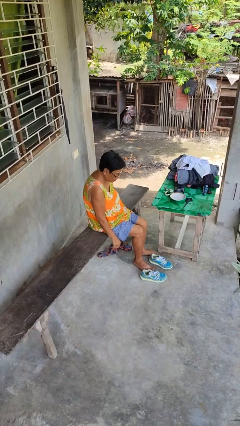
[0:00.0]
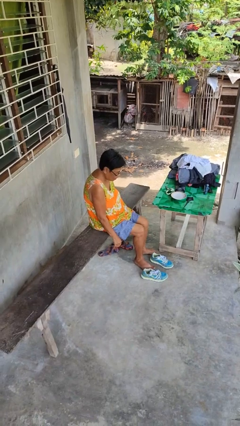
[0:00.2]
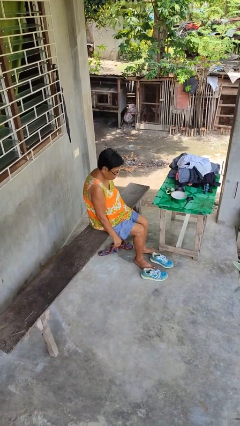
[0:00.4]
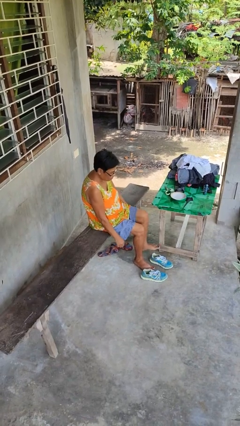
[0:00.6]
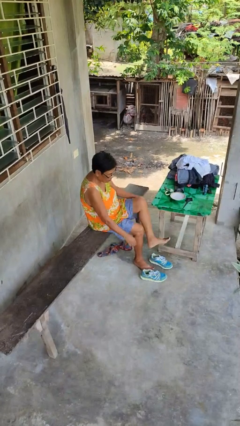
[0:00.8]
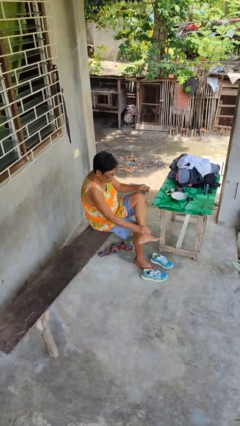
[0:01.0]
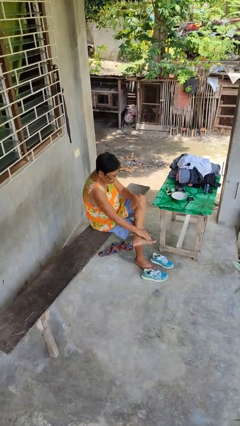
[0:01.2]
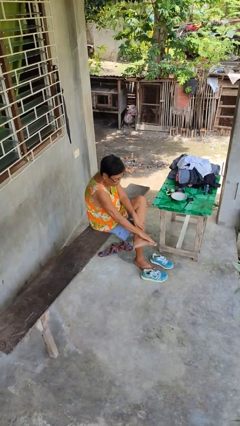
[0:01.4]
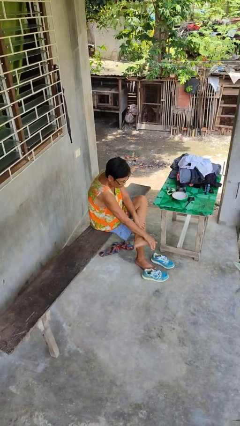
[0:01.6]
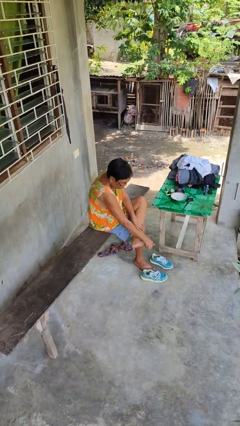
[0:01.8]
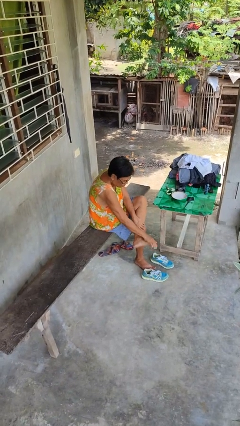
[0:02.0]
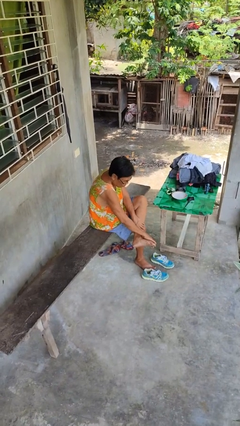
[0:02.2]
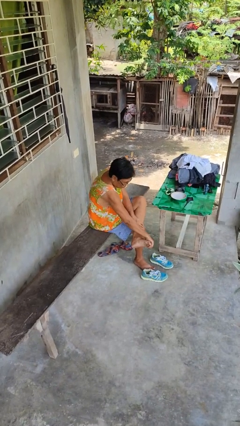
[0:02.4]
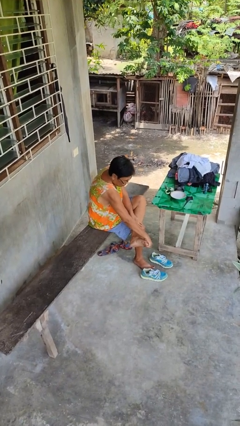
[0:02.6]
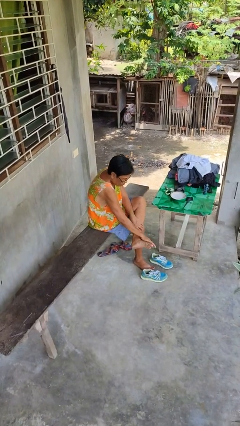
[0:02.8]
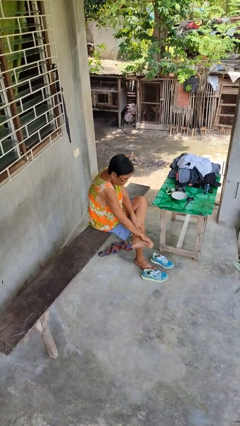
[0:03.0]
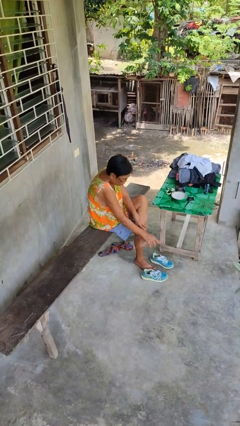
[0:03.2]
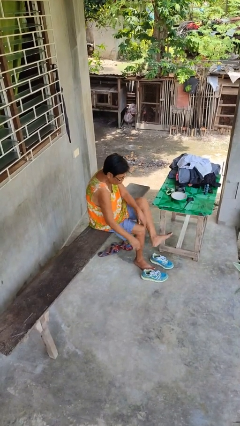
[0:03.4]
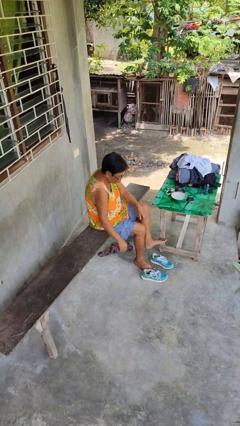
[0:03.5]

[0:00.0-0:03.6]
person rubs foot

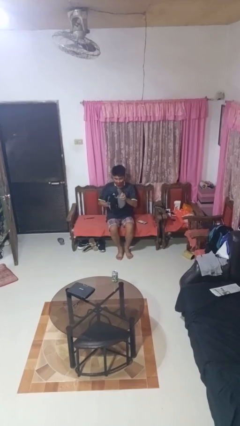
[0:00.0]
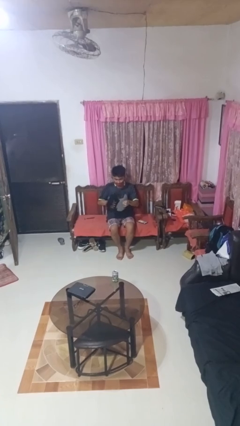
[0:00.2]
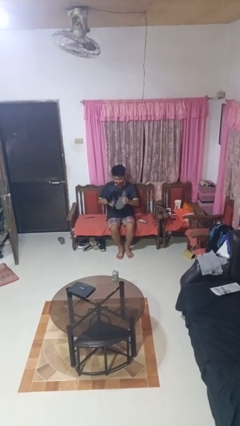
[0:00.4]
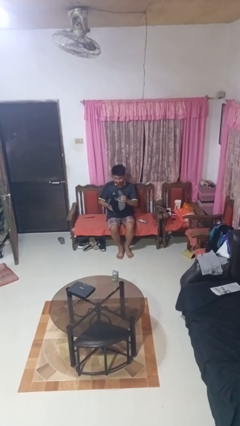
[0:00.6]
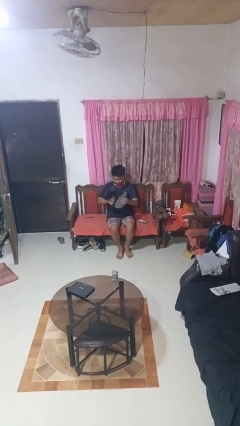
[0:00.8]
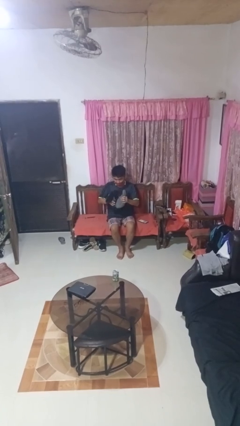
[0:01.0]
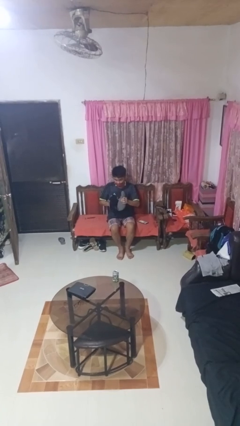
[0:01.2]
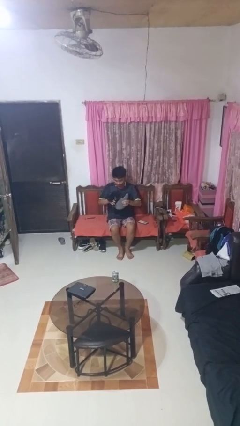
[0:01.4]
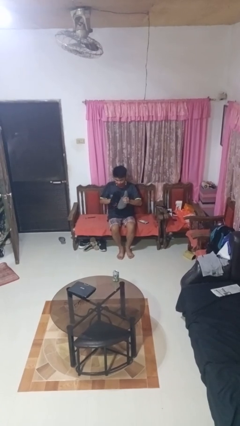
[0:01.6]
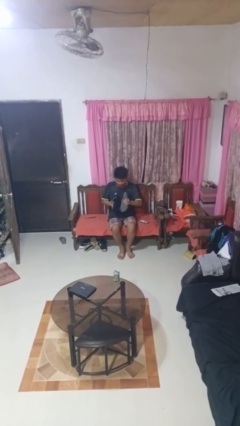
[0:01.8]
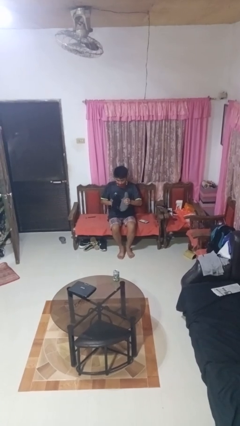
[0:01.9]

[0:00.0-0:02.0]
person squeezes object

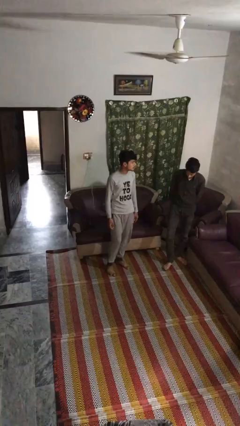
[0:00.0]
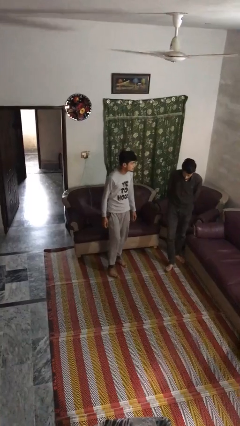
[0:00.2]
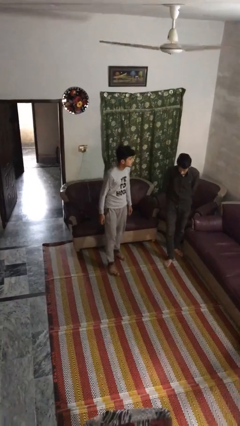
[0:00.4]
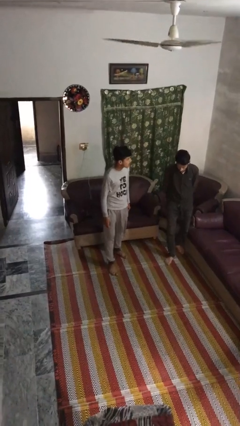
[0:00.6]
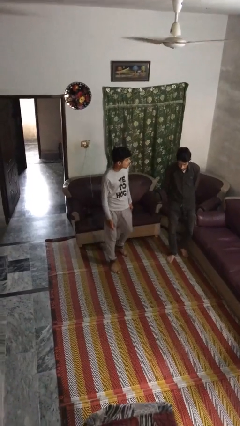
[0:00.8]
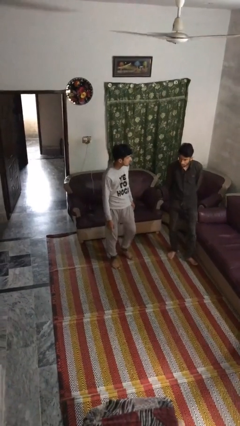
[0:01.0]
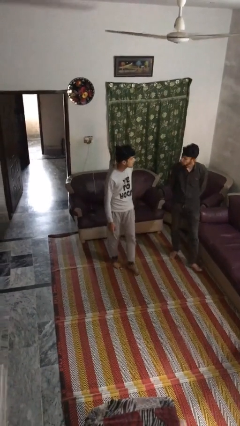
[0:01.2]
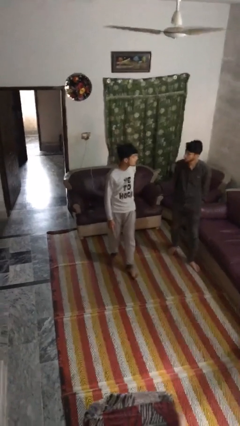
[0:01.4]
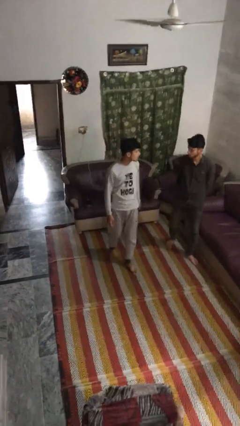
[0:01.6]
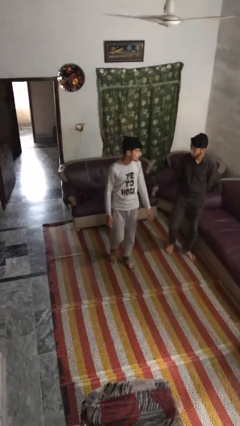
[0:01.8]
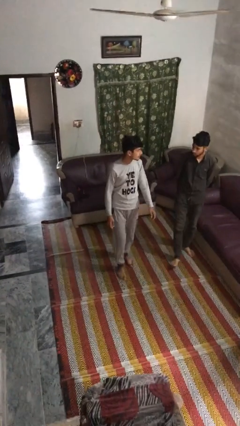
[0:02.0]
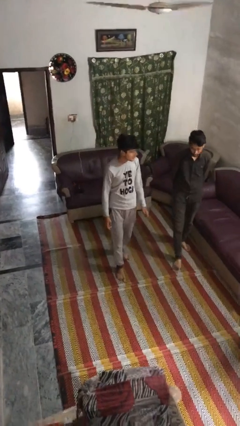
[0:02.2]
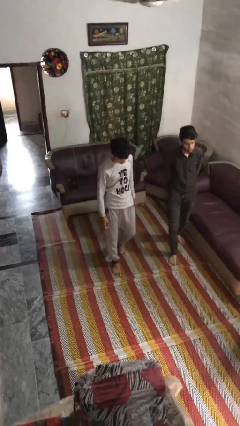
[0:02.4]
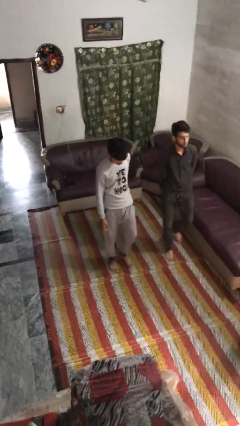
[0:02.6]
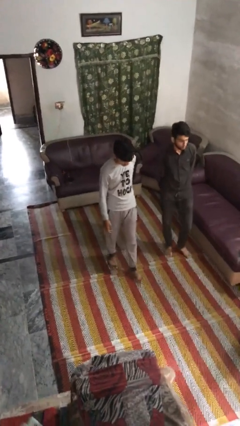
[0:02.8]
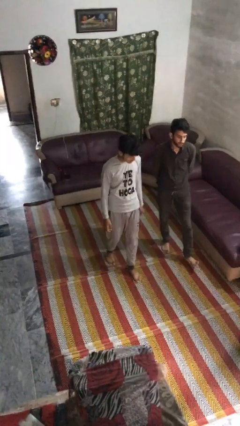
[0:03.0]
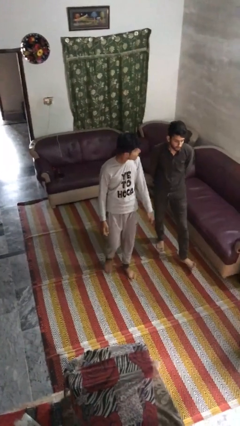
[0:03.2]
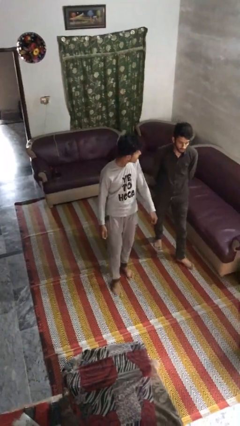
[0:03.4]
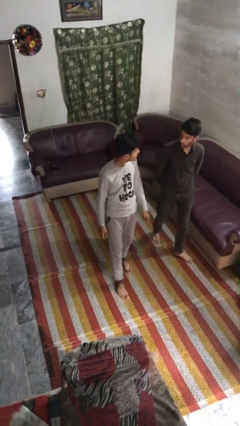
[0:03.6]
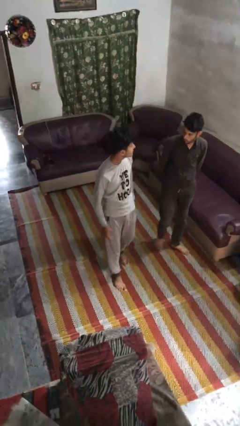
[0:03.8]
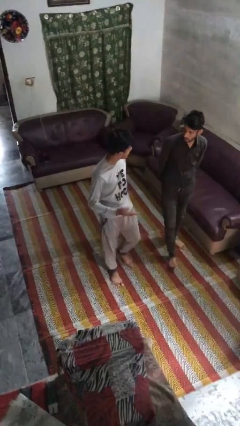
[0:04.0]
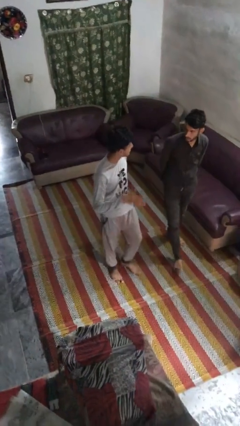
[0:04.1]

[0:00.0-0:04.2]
person talks to person

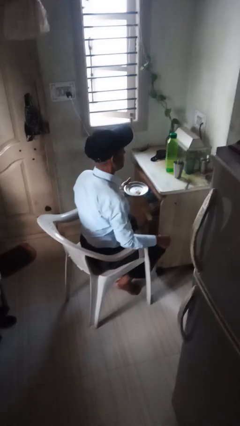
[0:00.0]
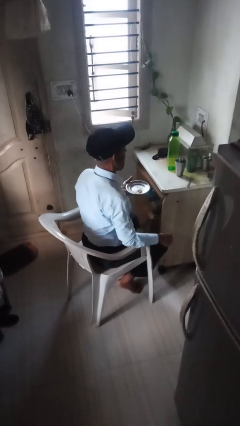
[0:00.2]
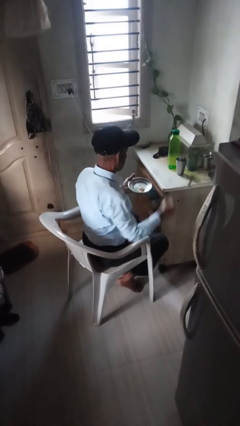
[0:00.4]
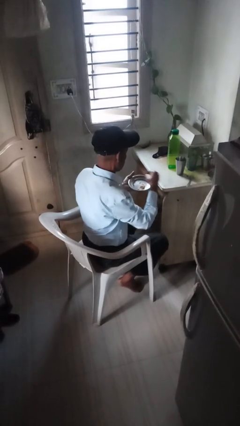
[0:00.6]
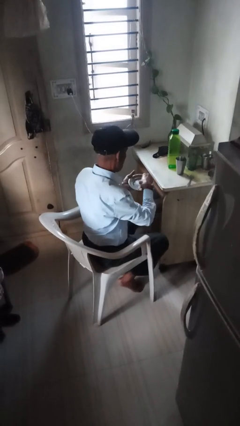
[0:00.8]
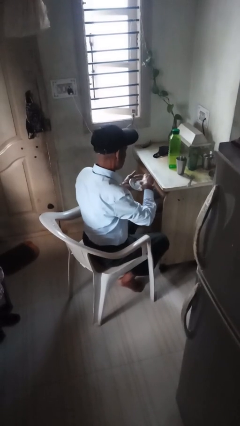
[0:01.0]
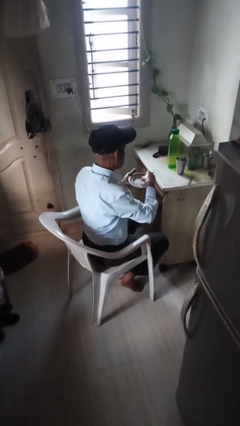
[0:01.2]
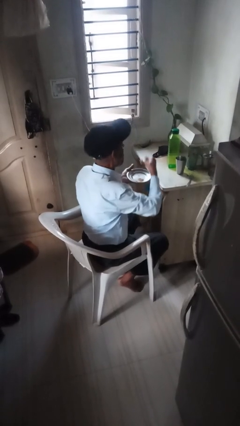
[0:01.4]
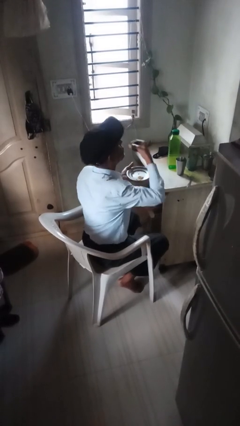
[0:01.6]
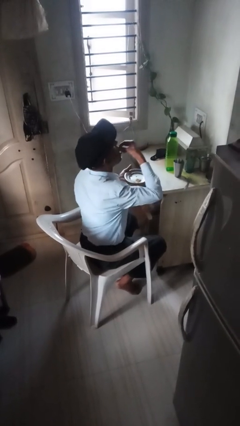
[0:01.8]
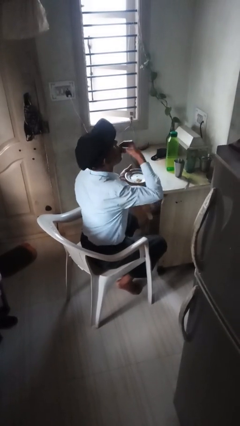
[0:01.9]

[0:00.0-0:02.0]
person eats with hands

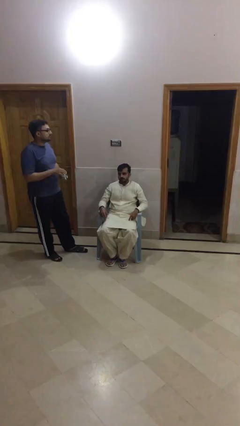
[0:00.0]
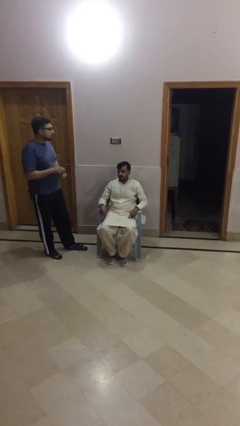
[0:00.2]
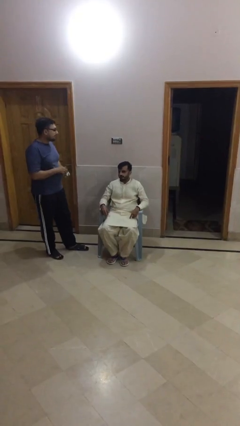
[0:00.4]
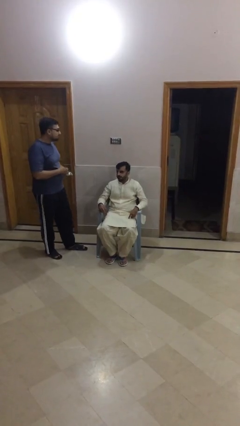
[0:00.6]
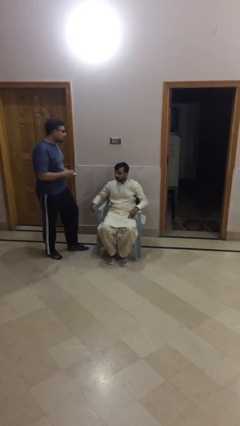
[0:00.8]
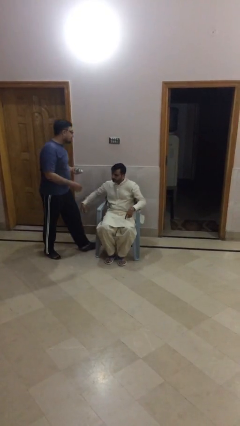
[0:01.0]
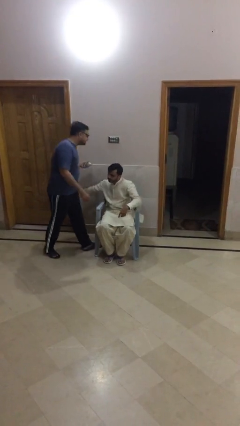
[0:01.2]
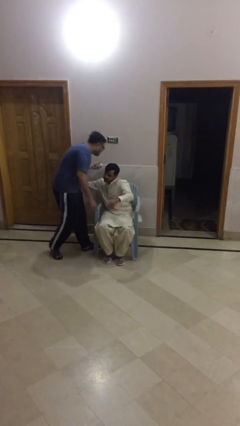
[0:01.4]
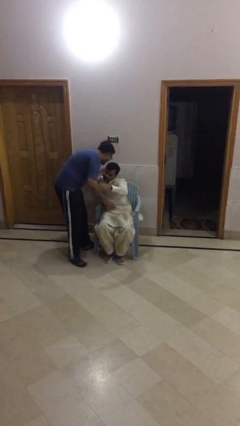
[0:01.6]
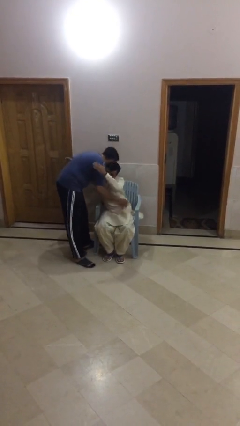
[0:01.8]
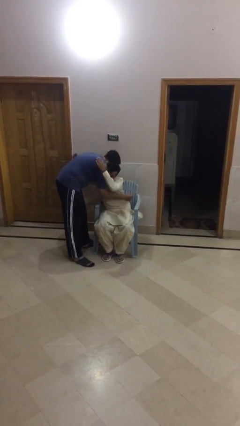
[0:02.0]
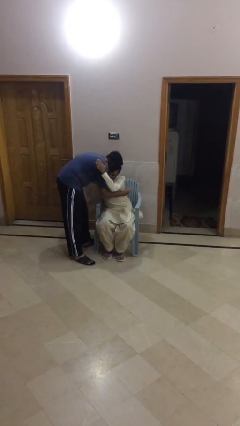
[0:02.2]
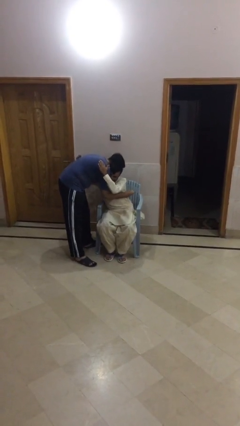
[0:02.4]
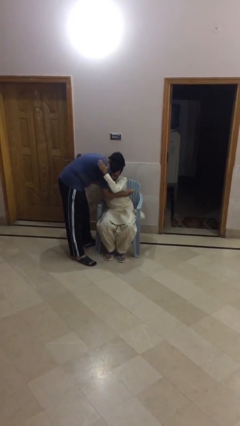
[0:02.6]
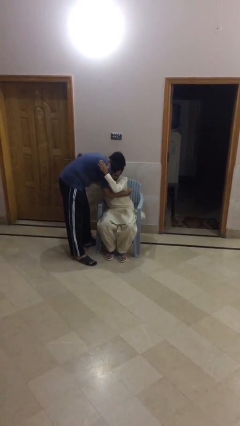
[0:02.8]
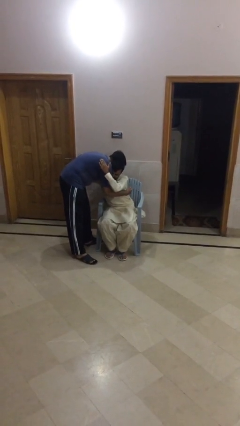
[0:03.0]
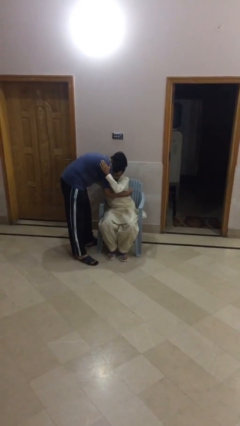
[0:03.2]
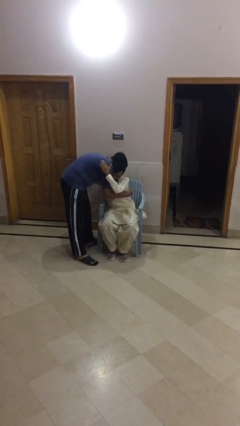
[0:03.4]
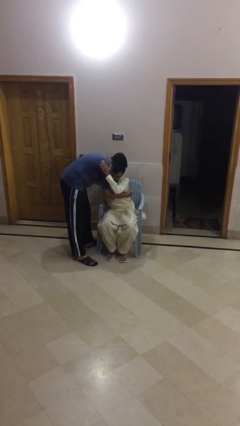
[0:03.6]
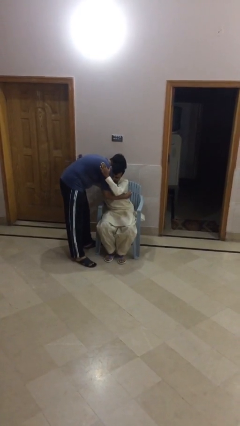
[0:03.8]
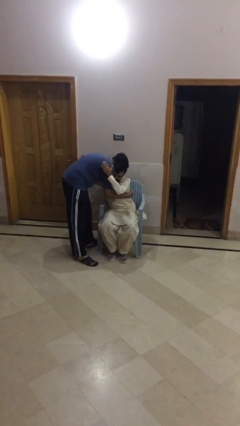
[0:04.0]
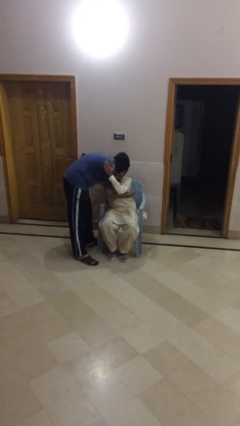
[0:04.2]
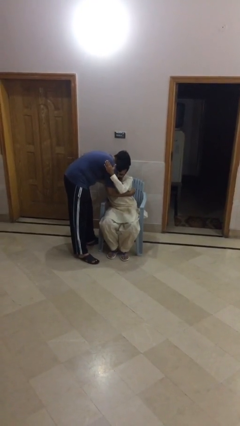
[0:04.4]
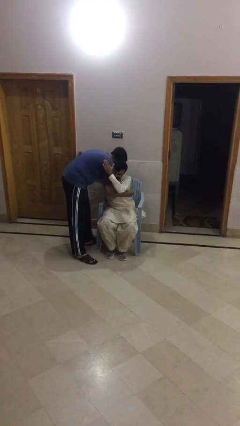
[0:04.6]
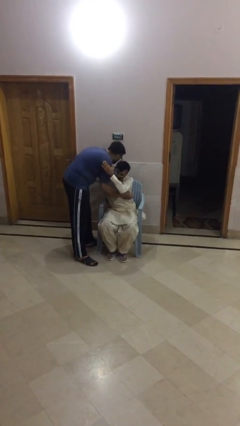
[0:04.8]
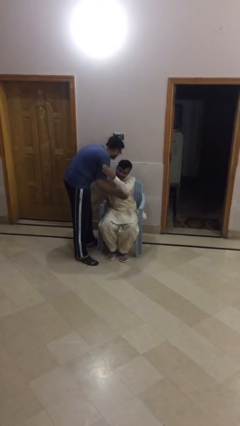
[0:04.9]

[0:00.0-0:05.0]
person embraces person

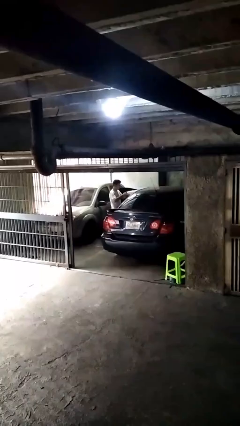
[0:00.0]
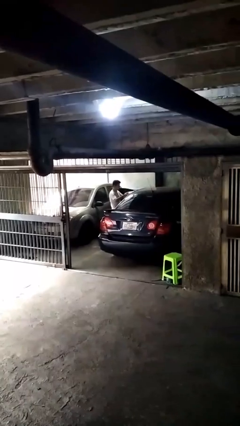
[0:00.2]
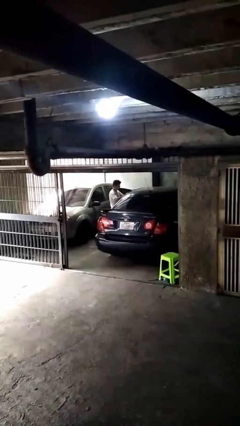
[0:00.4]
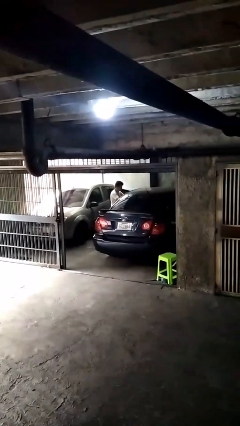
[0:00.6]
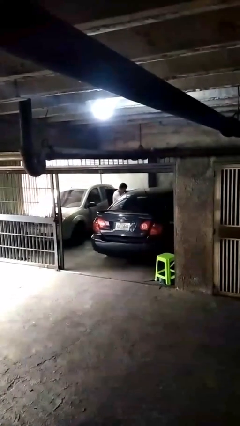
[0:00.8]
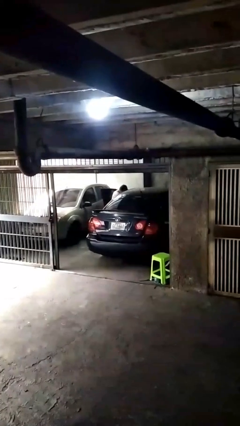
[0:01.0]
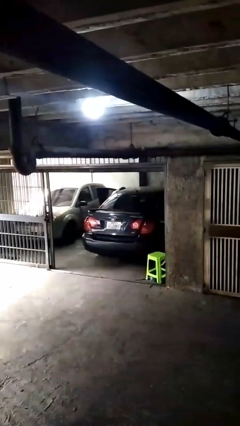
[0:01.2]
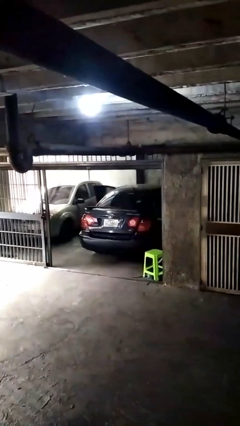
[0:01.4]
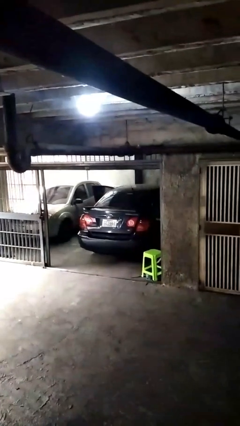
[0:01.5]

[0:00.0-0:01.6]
person loads car
